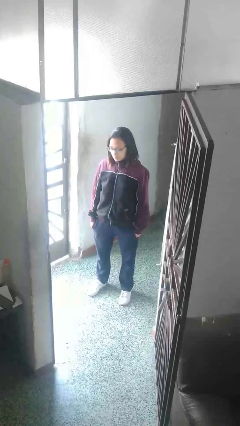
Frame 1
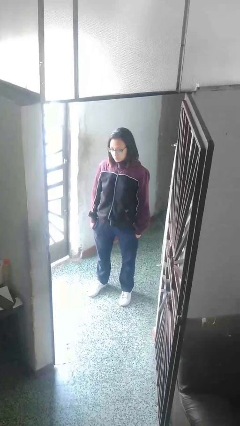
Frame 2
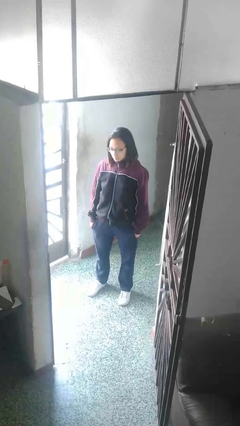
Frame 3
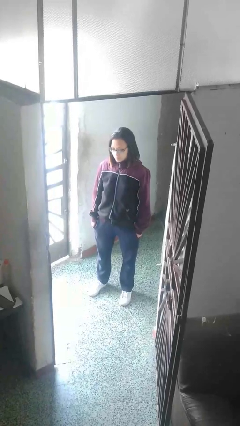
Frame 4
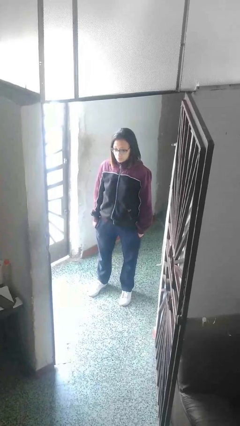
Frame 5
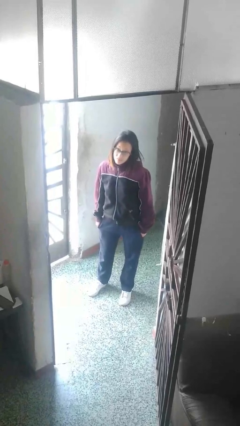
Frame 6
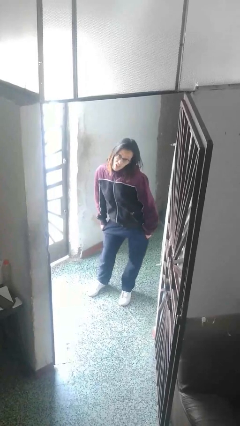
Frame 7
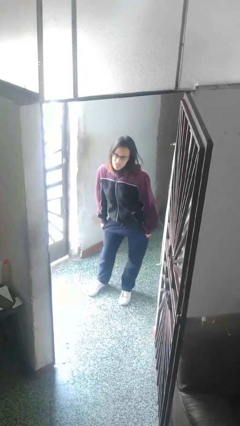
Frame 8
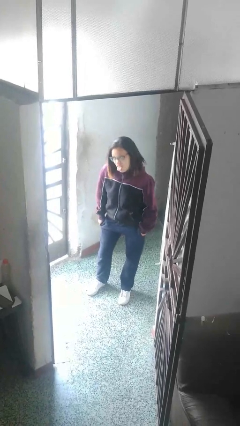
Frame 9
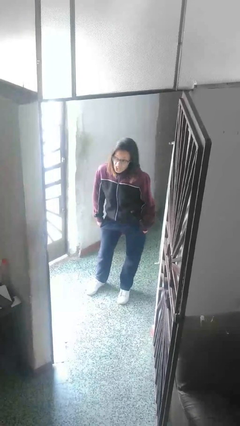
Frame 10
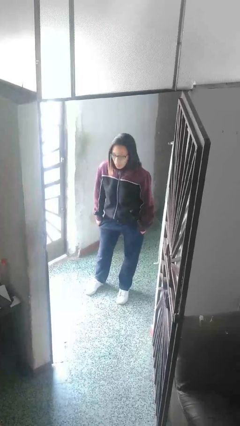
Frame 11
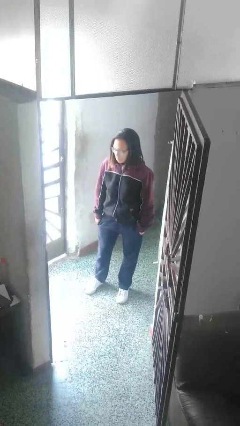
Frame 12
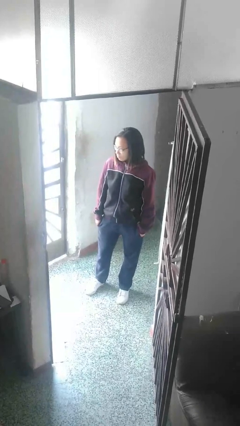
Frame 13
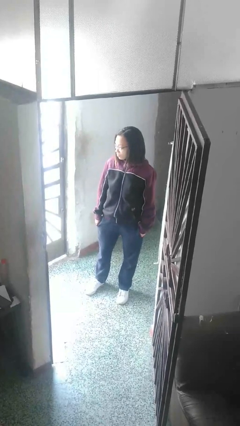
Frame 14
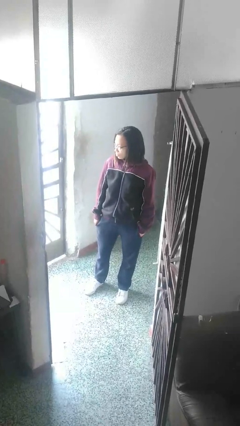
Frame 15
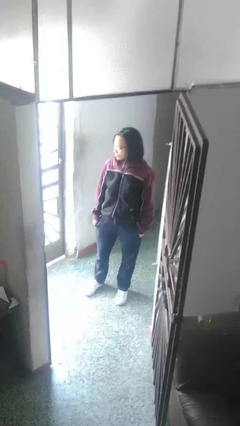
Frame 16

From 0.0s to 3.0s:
person sticks out tongue

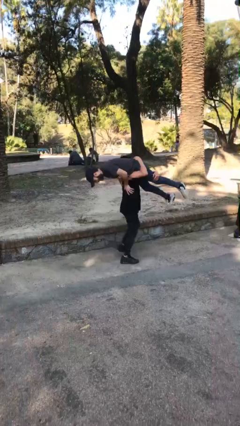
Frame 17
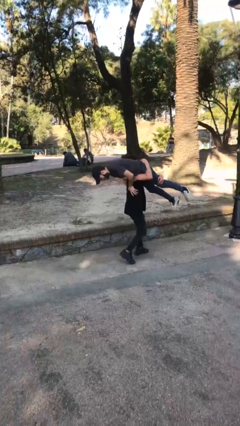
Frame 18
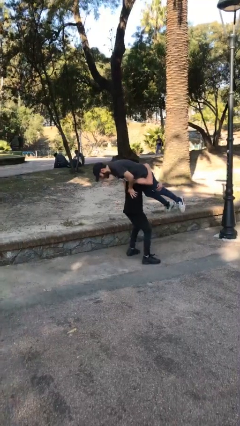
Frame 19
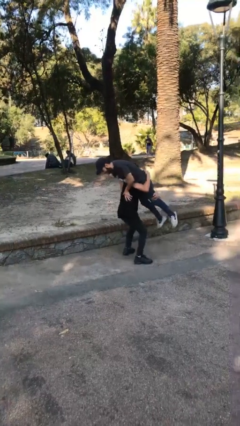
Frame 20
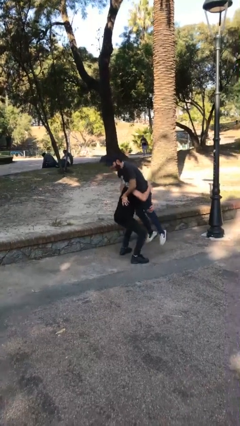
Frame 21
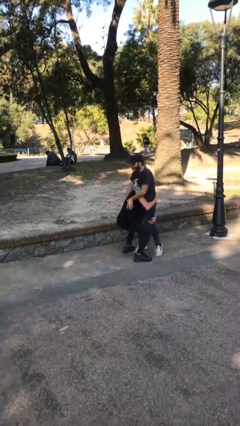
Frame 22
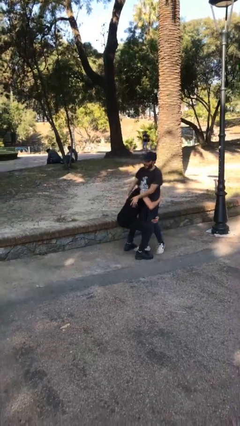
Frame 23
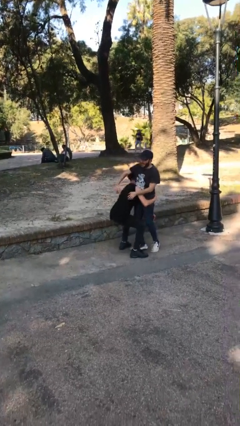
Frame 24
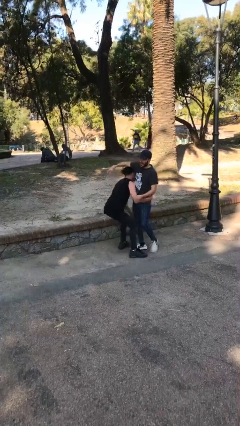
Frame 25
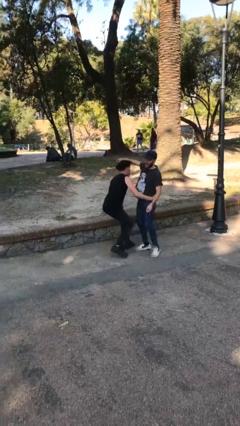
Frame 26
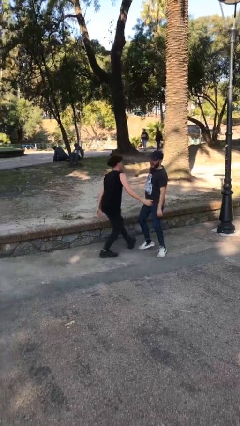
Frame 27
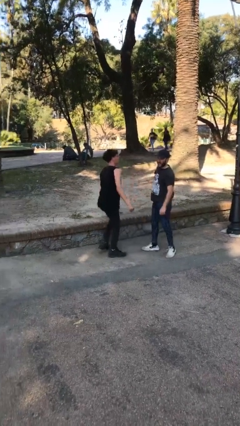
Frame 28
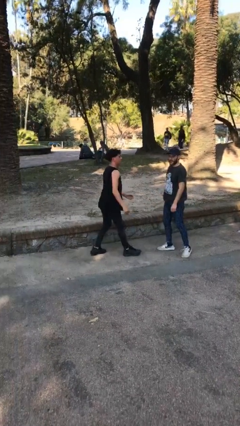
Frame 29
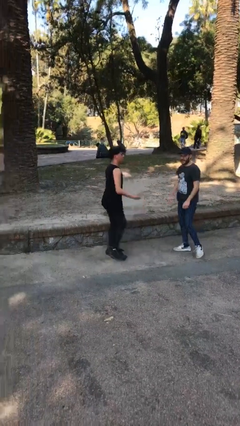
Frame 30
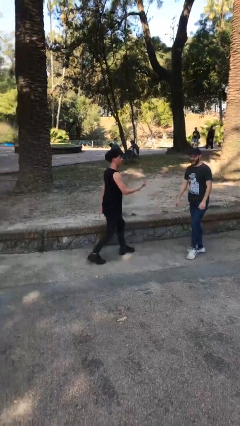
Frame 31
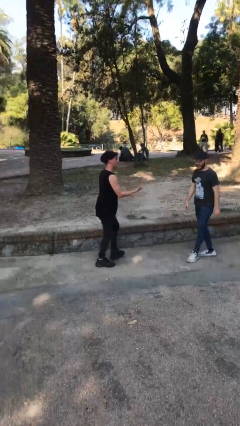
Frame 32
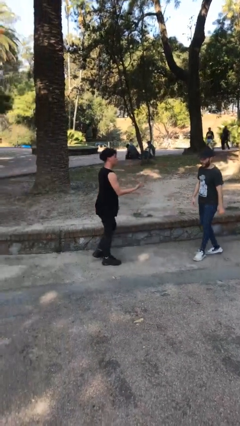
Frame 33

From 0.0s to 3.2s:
person puts down person

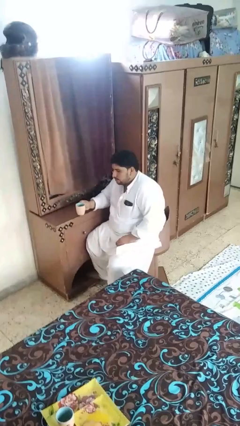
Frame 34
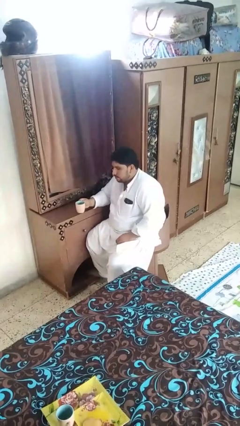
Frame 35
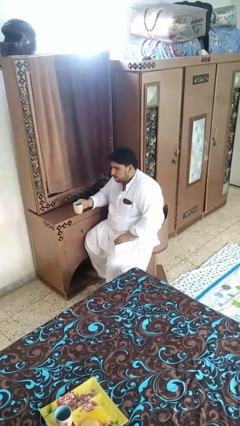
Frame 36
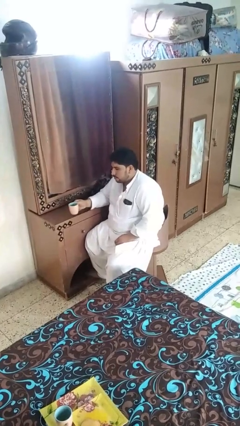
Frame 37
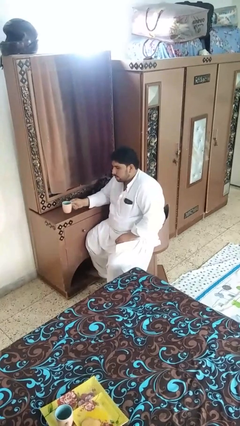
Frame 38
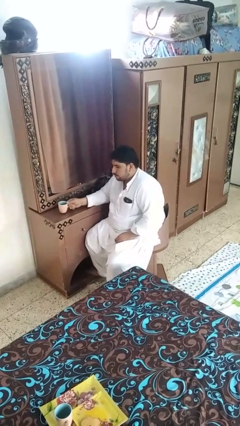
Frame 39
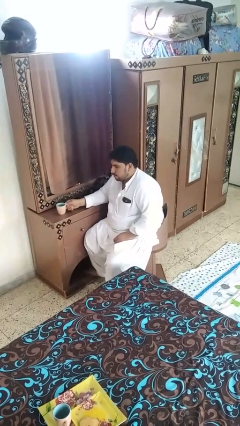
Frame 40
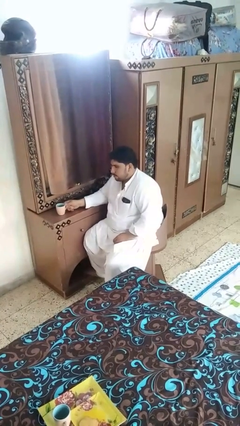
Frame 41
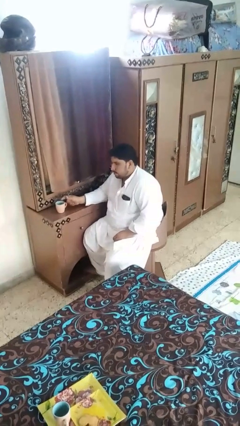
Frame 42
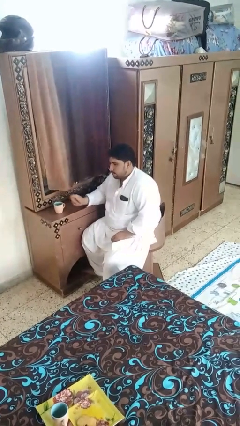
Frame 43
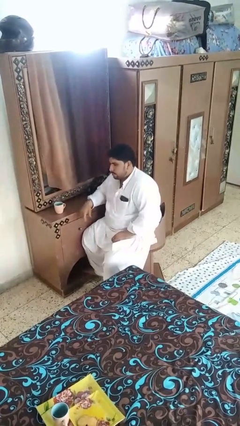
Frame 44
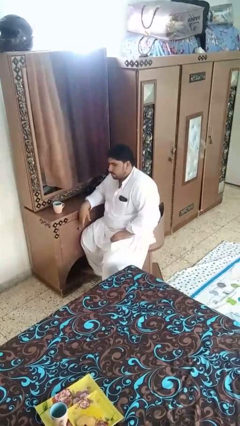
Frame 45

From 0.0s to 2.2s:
person puts down object on table

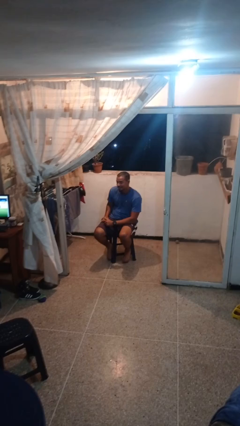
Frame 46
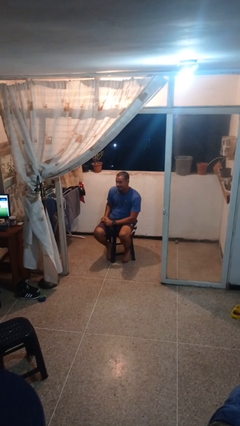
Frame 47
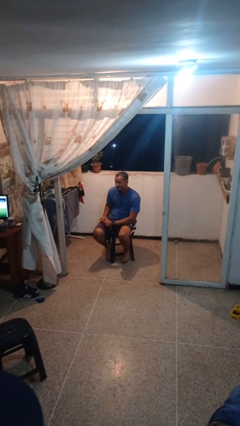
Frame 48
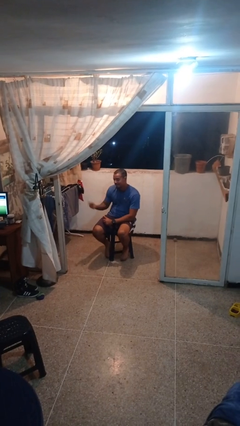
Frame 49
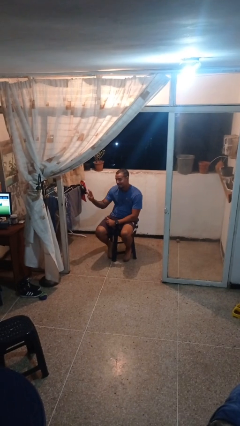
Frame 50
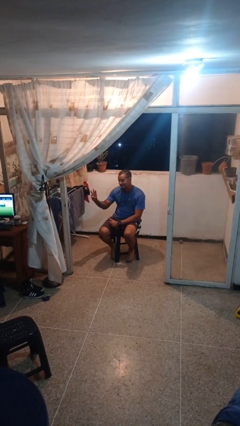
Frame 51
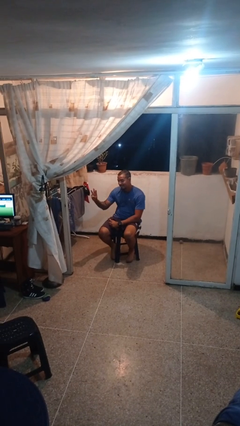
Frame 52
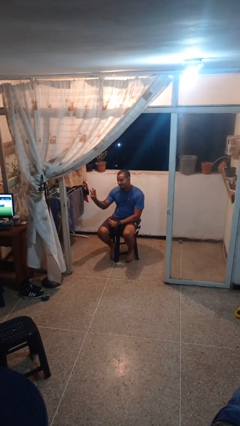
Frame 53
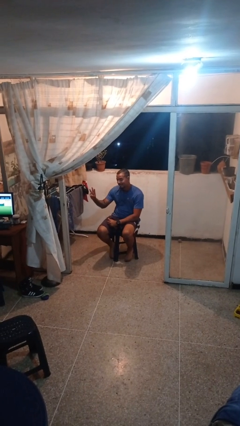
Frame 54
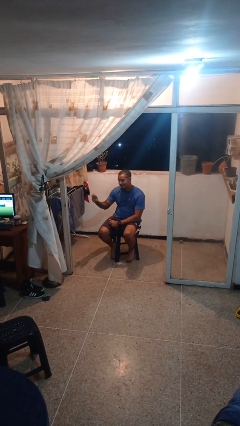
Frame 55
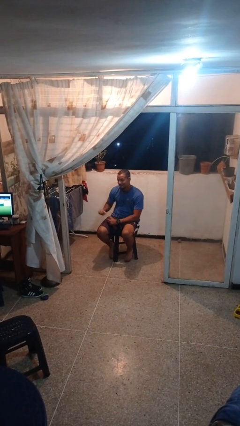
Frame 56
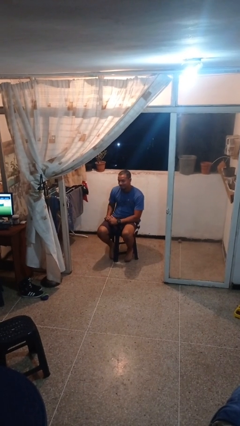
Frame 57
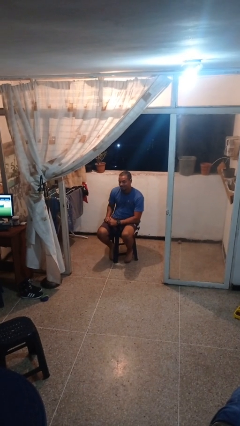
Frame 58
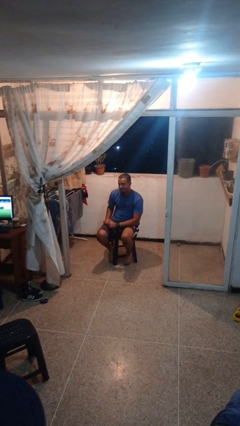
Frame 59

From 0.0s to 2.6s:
person gestures number three

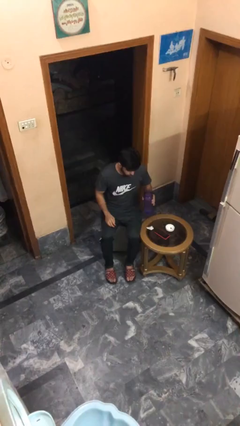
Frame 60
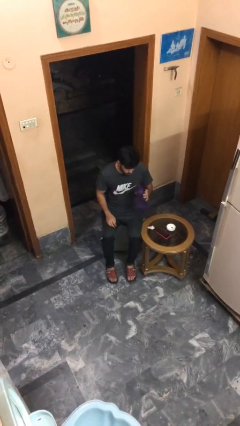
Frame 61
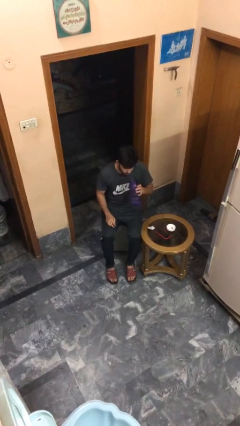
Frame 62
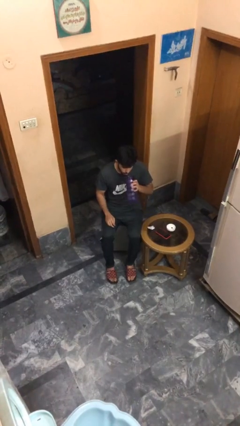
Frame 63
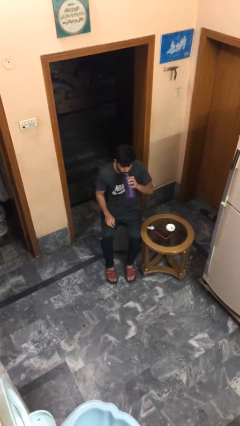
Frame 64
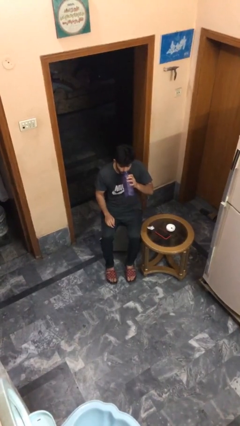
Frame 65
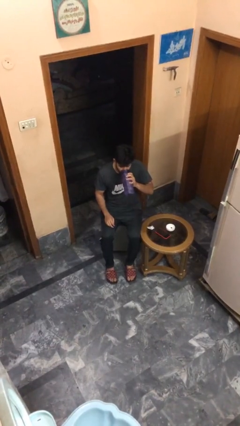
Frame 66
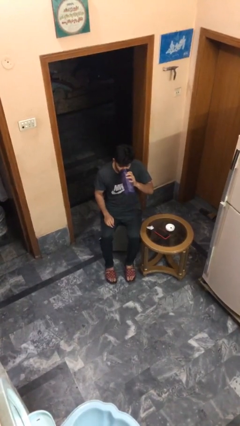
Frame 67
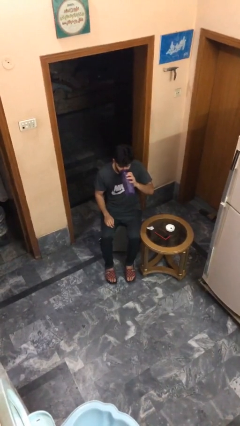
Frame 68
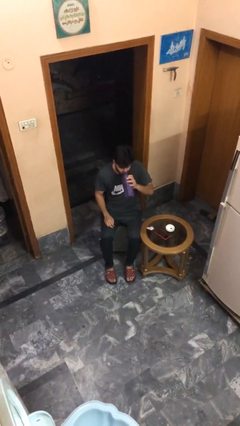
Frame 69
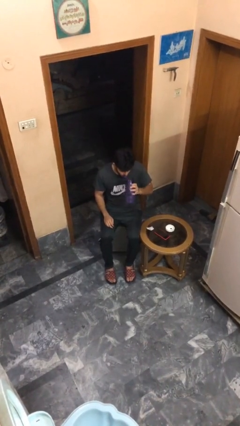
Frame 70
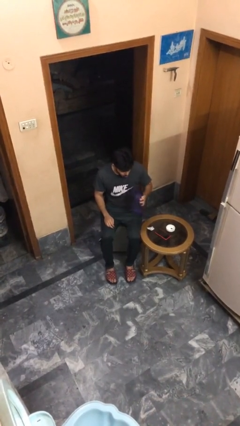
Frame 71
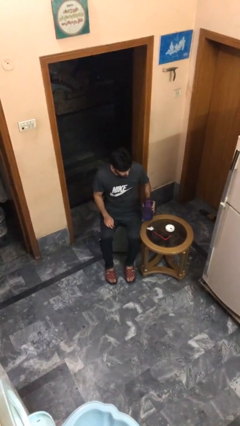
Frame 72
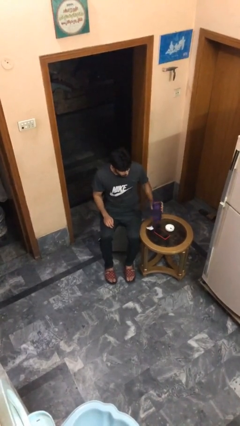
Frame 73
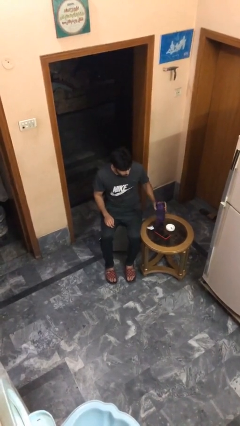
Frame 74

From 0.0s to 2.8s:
person drinks from cup

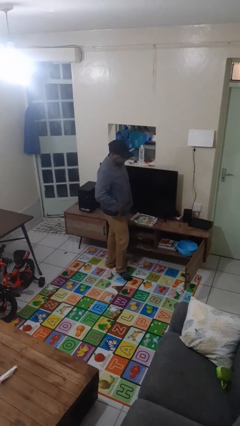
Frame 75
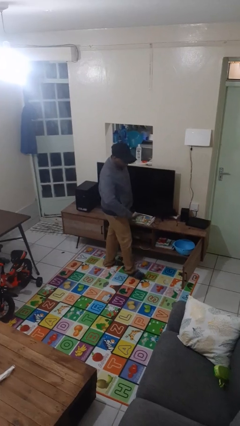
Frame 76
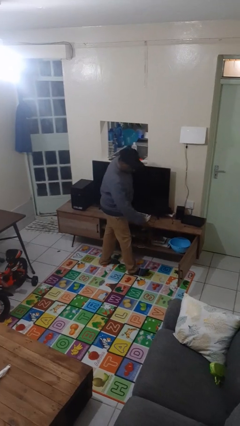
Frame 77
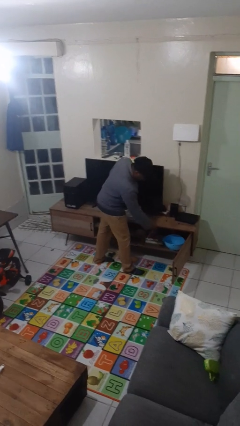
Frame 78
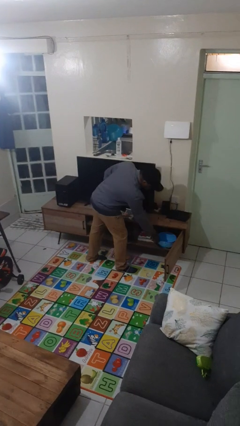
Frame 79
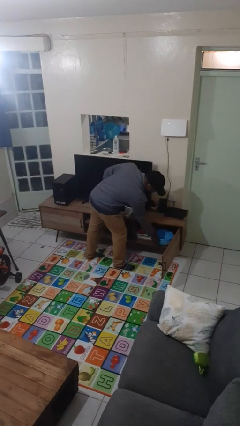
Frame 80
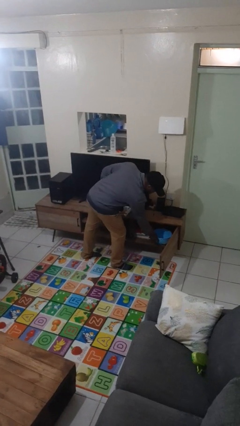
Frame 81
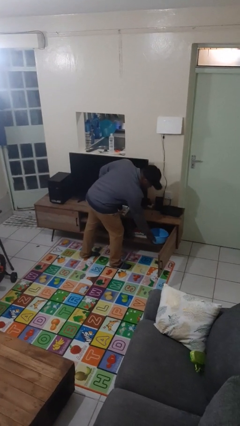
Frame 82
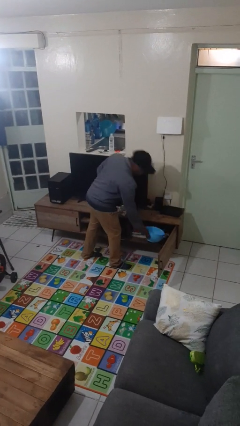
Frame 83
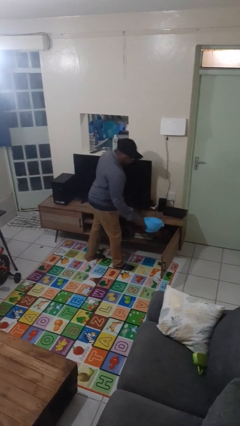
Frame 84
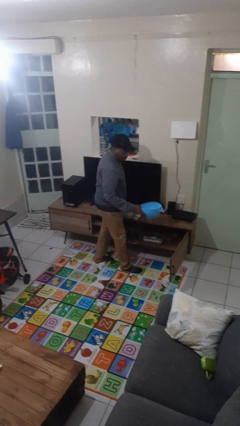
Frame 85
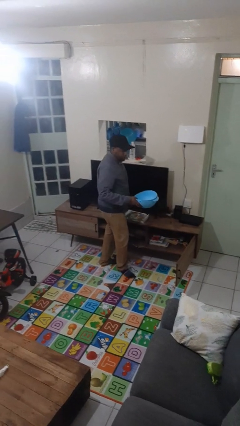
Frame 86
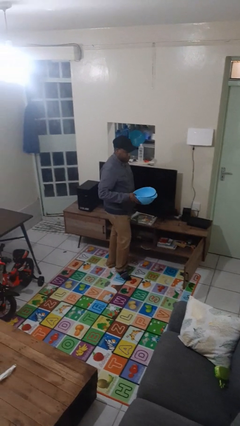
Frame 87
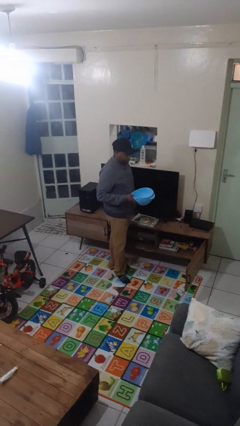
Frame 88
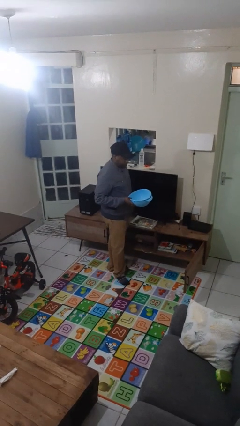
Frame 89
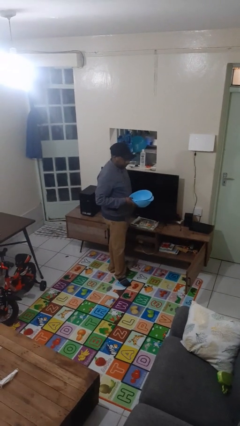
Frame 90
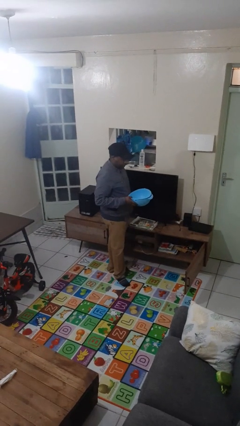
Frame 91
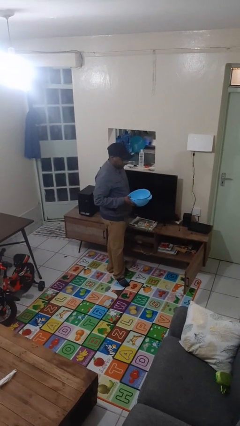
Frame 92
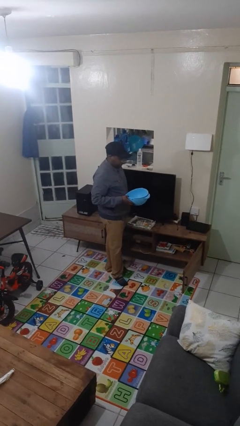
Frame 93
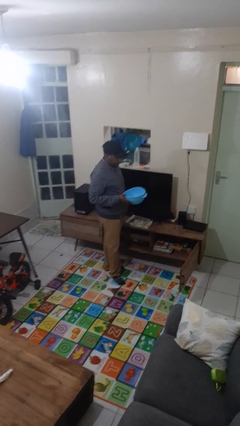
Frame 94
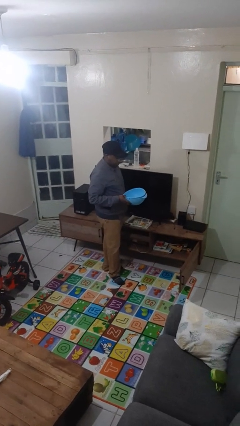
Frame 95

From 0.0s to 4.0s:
person picks up object from cabinet
